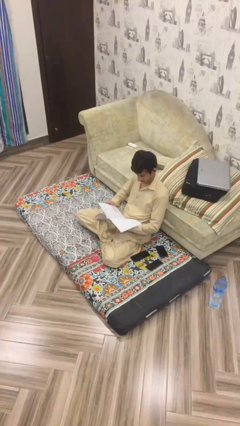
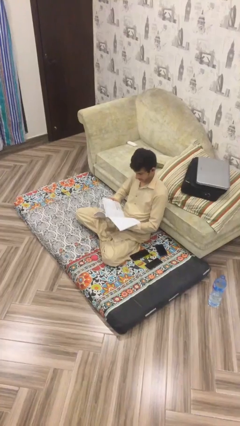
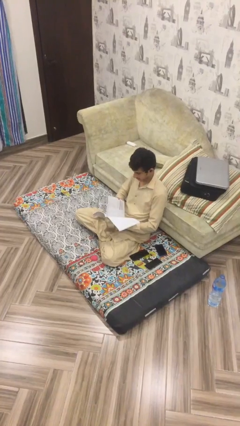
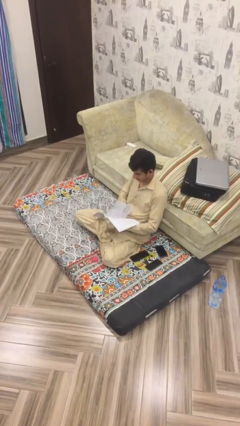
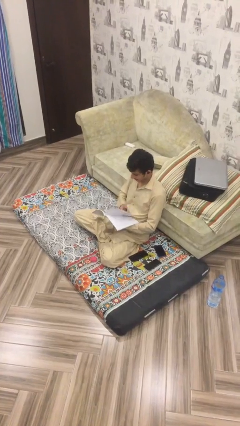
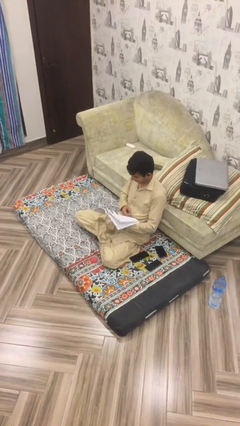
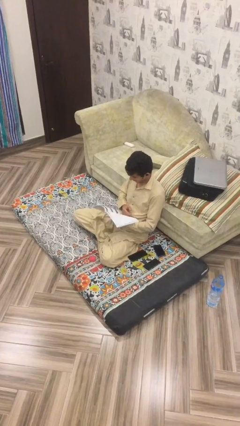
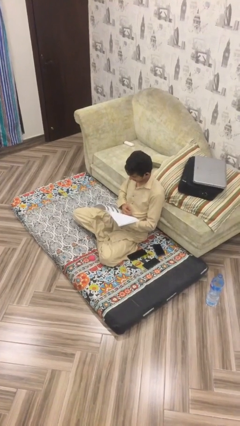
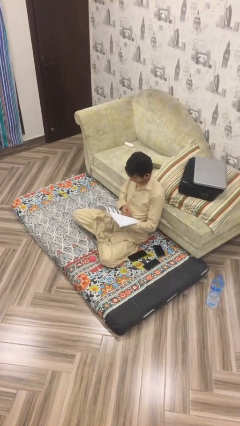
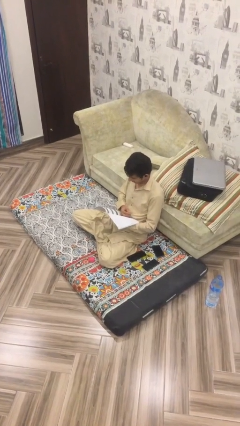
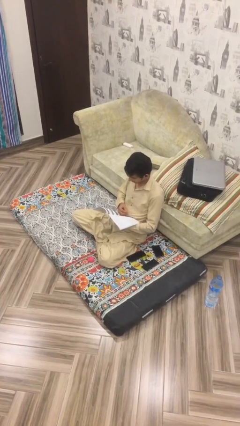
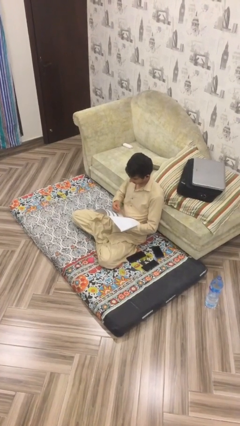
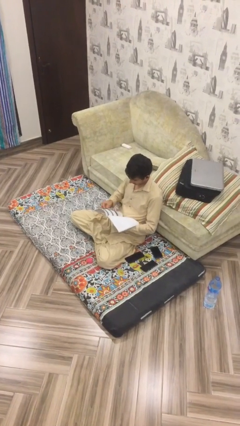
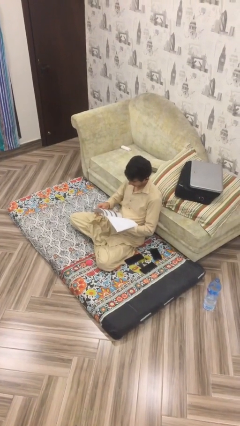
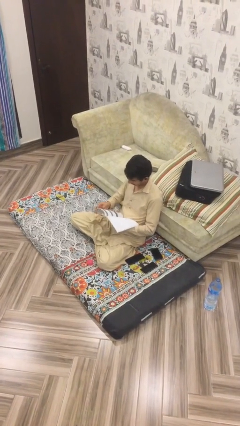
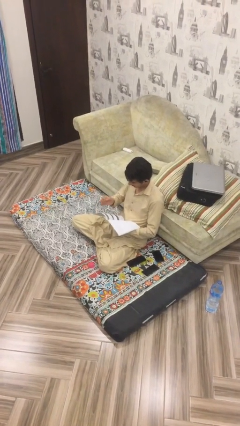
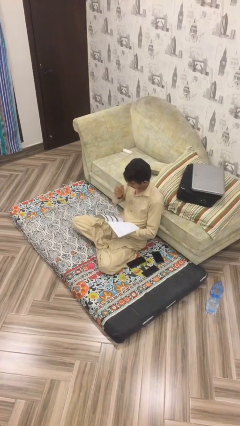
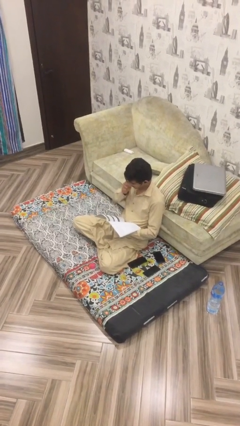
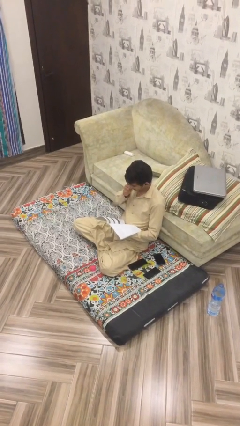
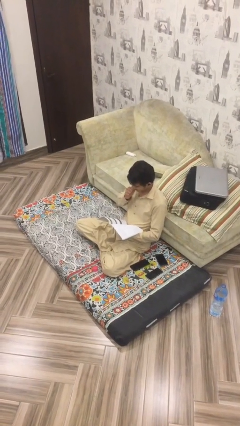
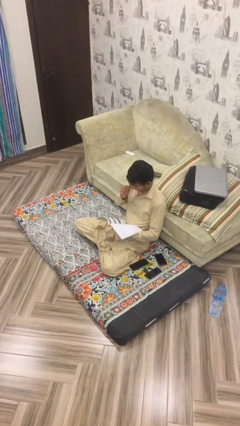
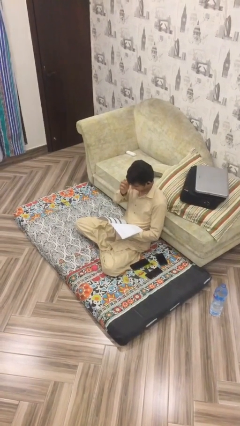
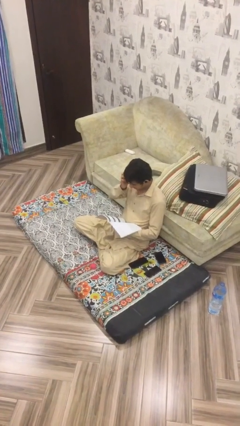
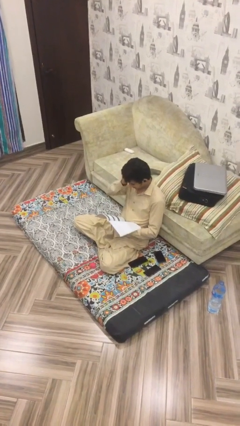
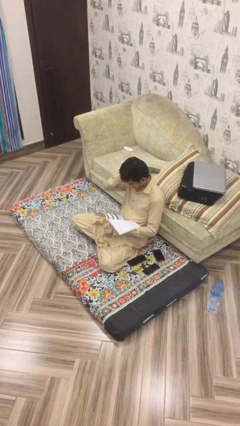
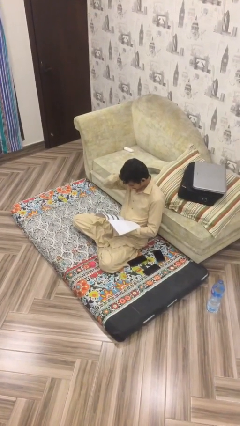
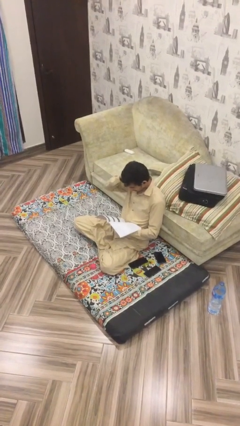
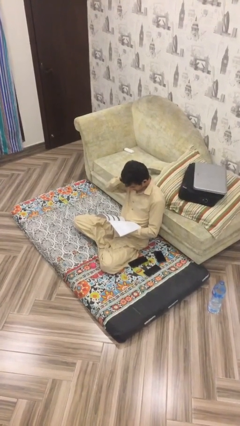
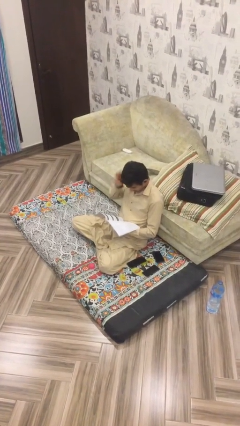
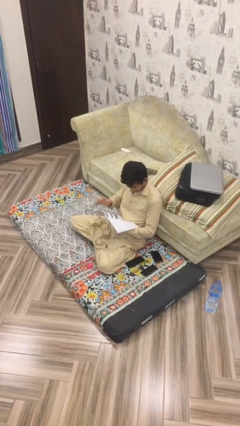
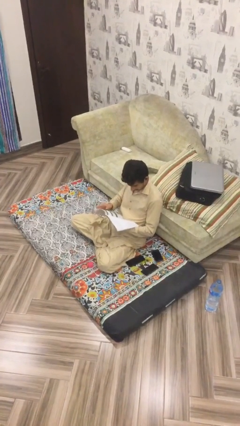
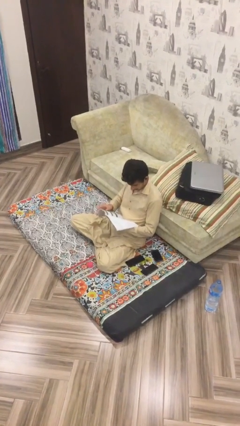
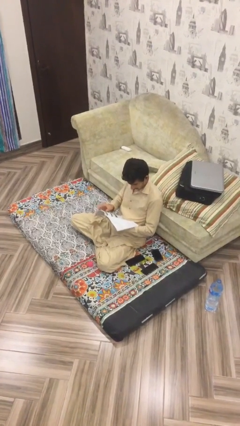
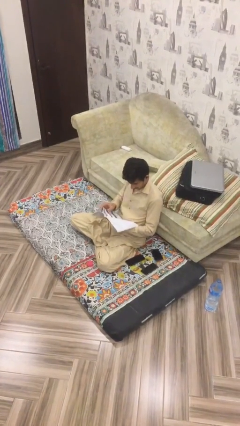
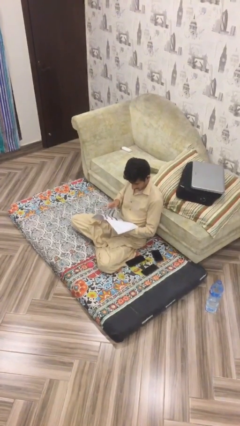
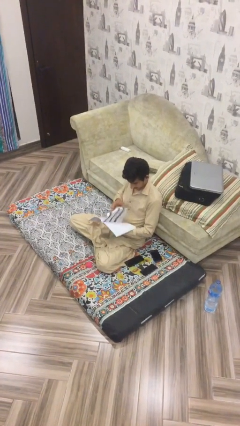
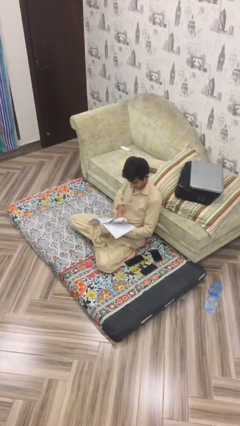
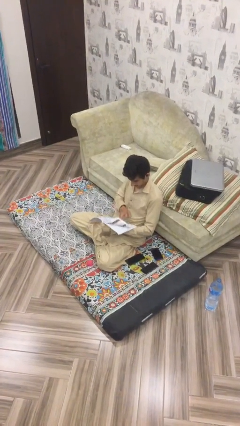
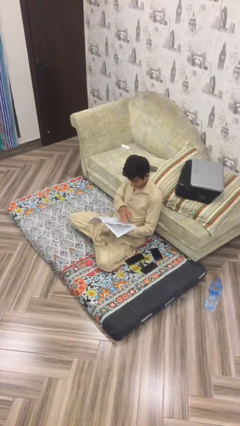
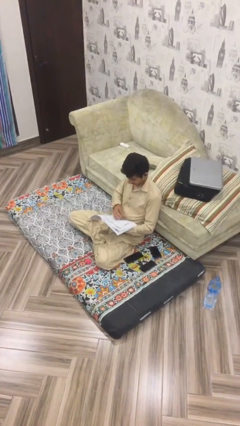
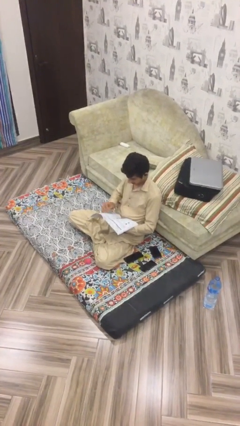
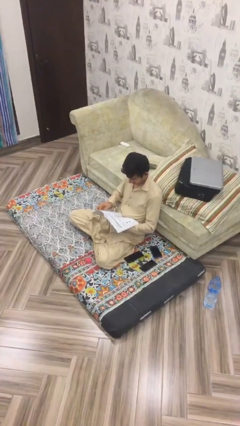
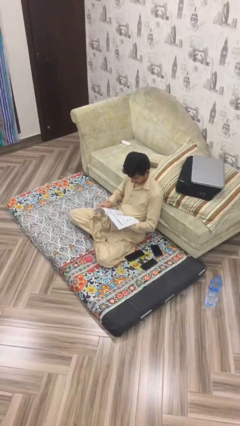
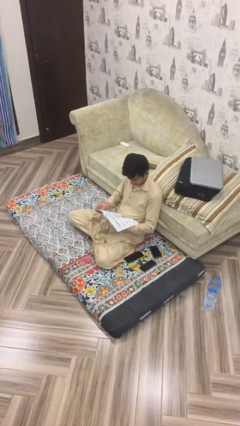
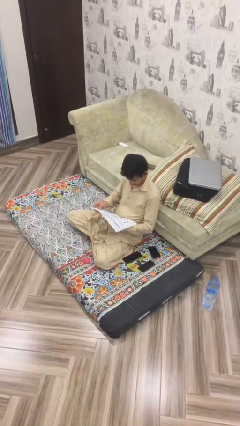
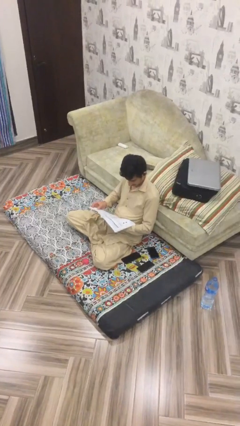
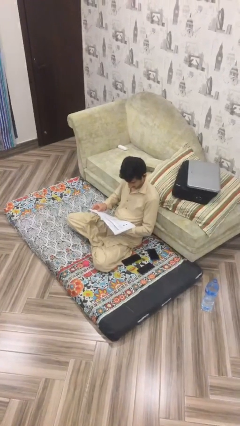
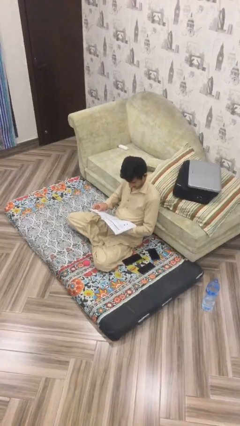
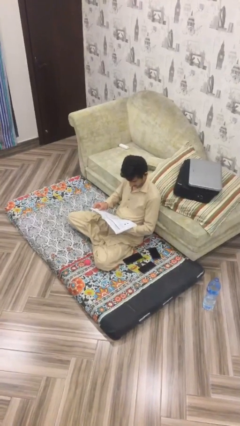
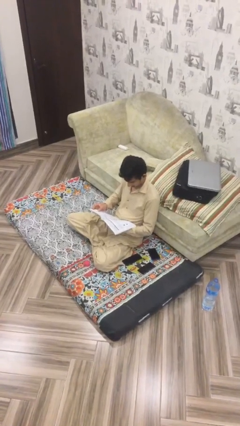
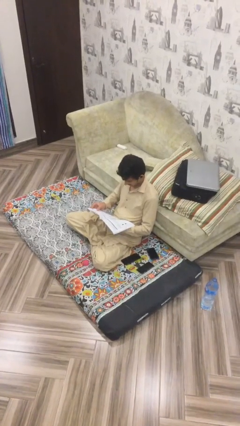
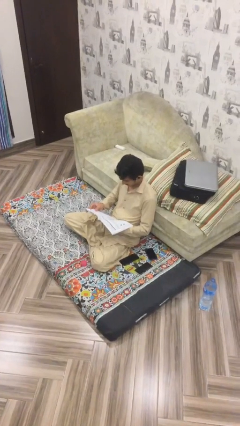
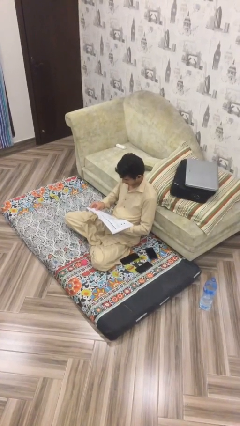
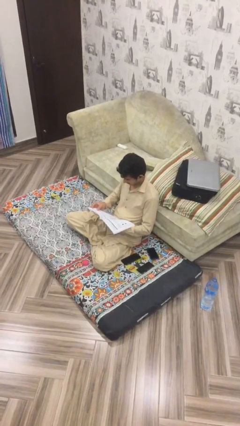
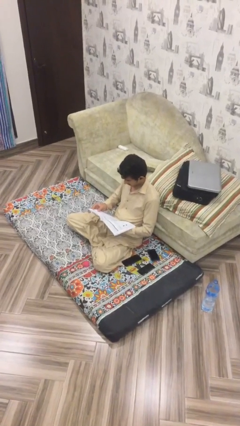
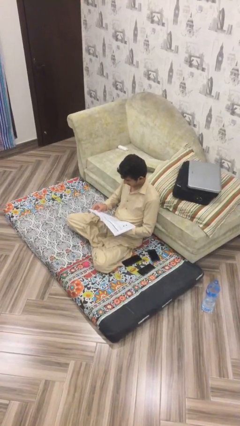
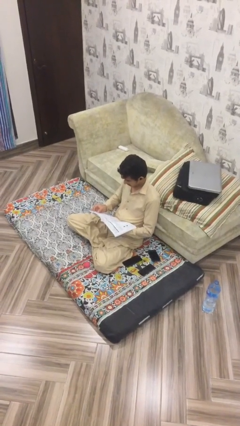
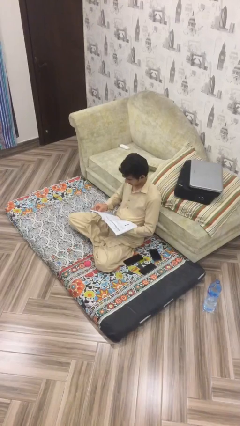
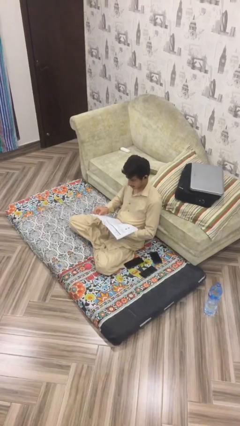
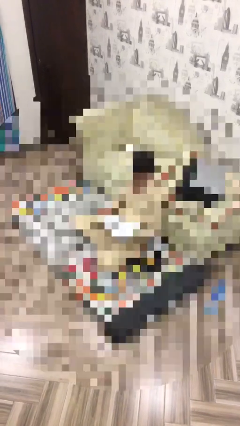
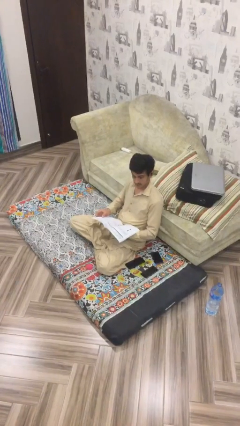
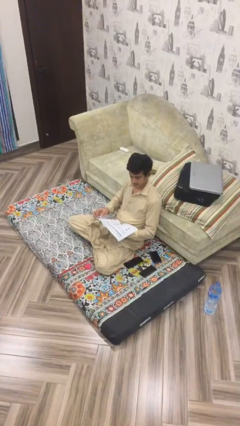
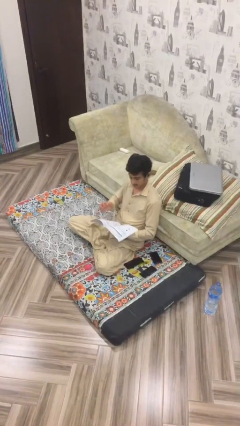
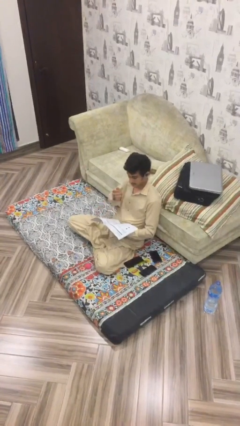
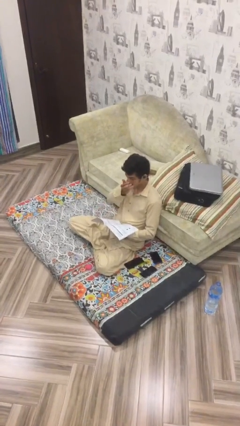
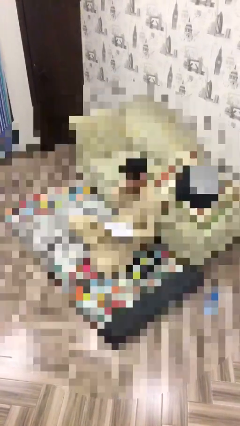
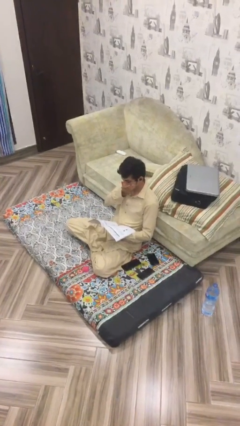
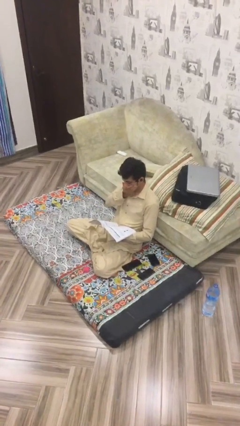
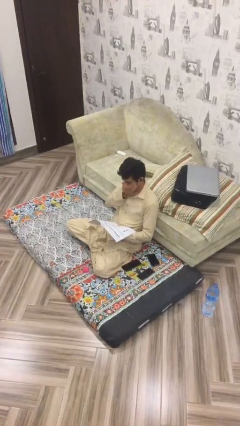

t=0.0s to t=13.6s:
person reads document

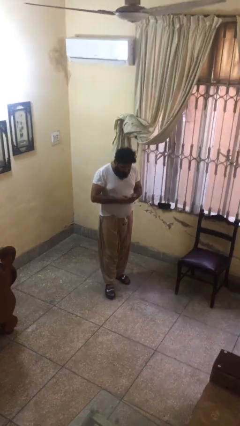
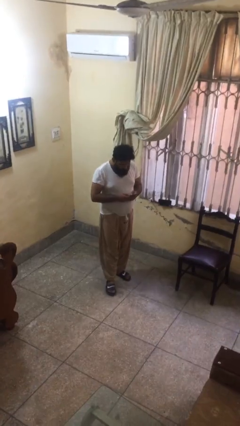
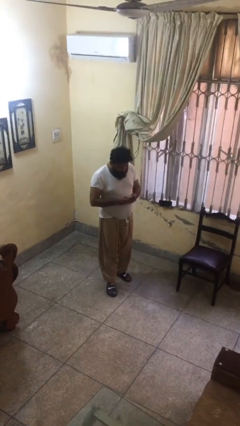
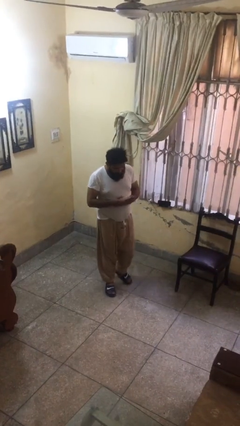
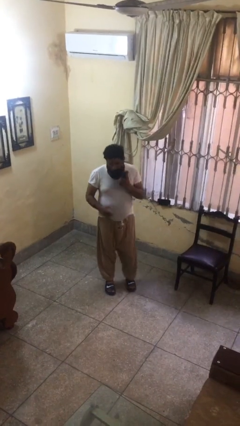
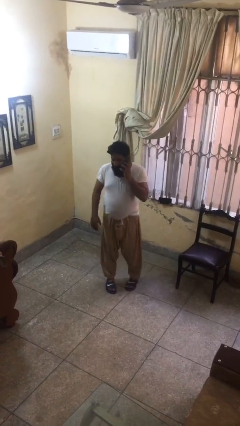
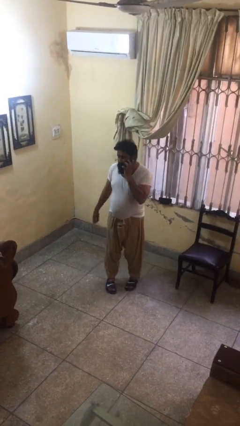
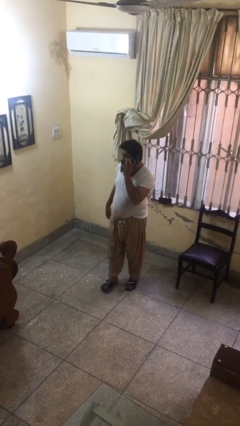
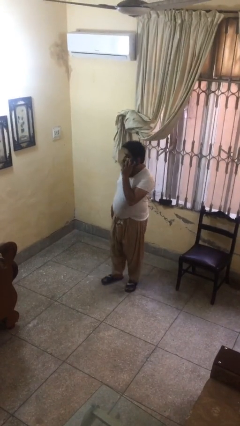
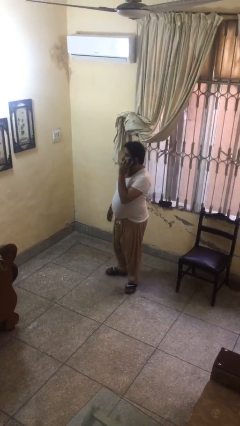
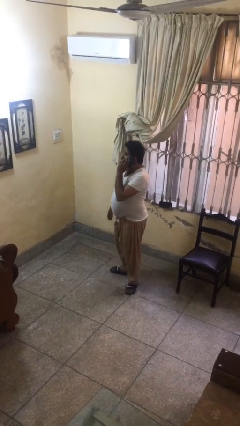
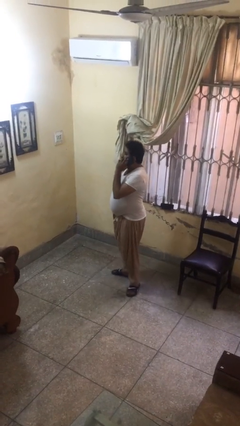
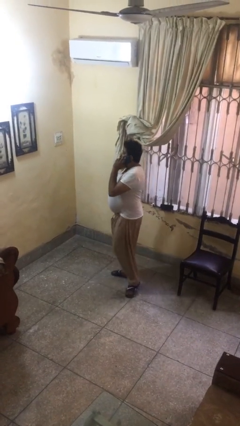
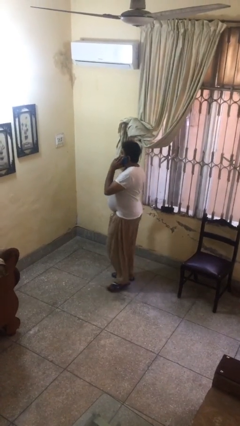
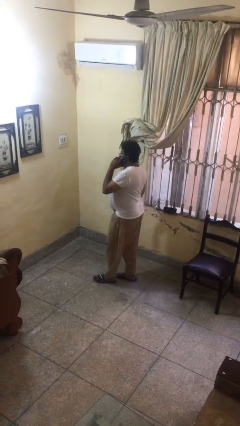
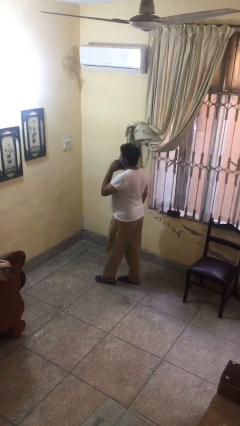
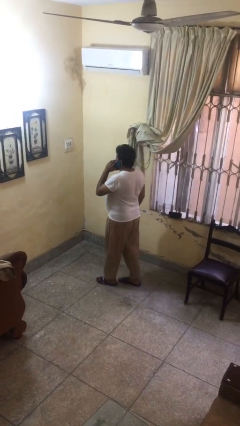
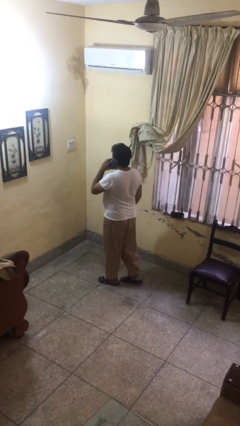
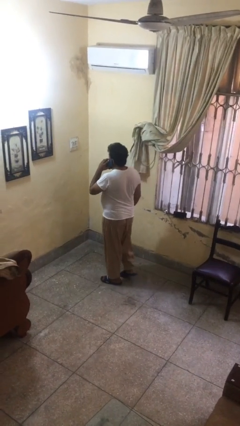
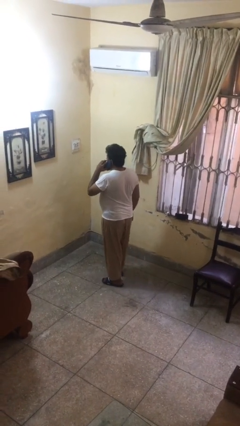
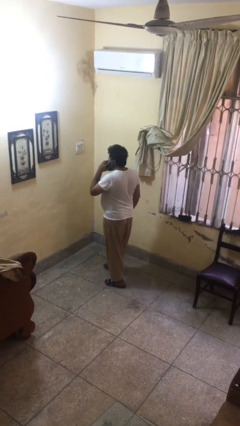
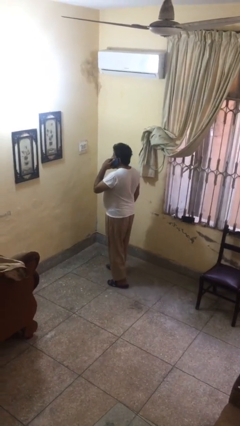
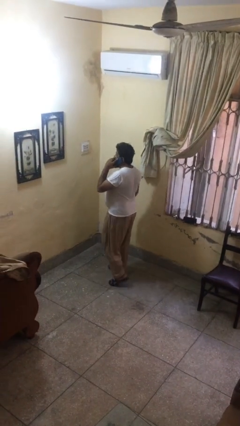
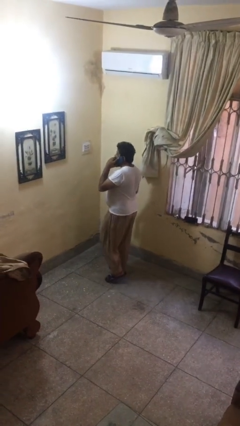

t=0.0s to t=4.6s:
person talks on phone
